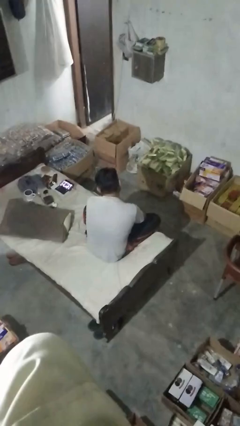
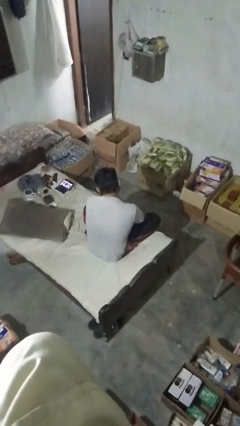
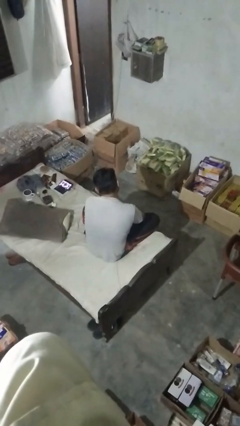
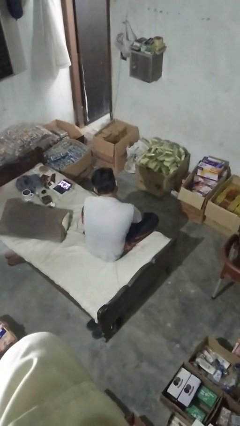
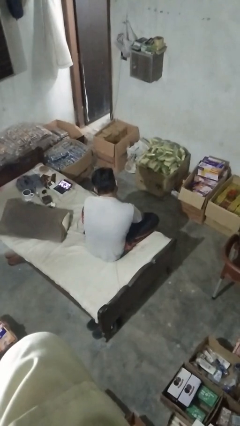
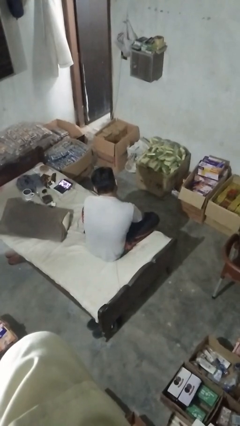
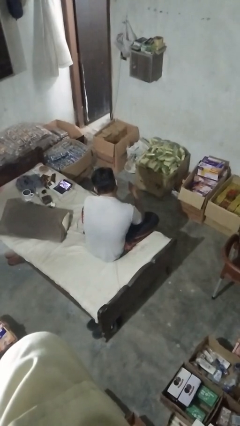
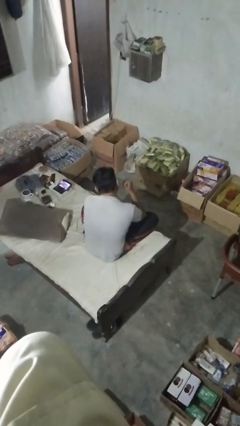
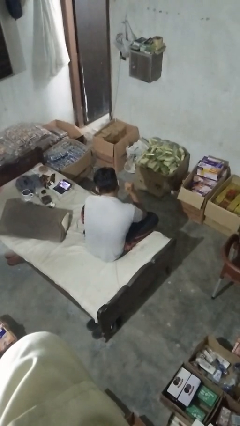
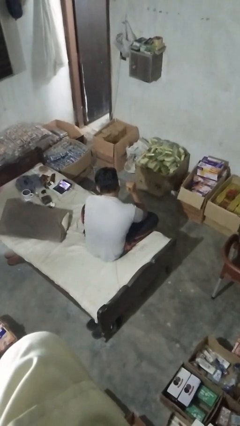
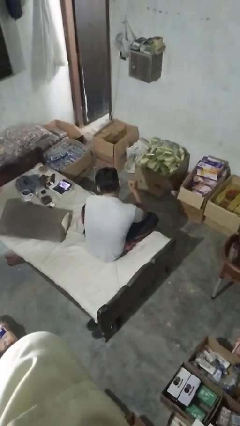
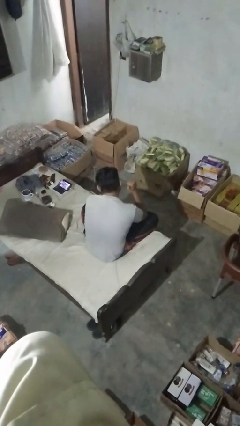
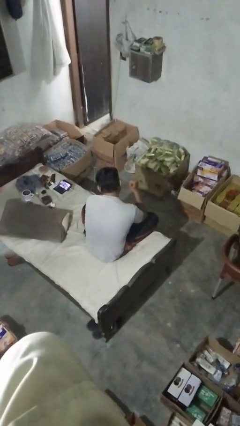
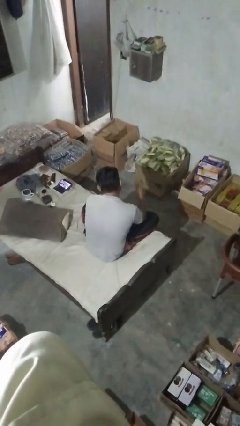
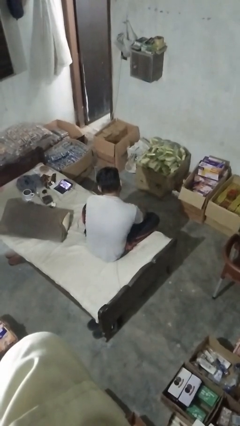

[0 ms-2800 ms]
person gestures behind me

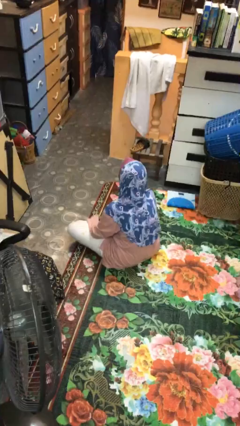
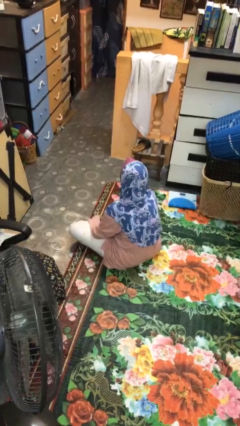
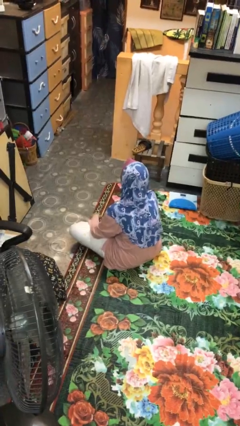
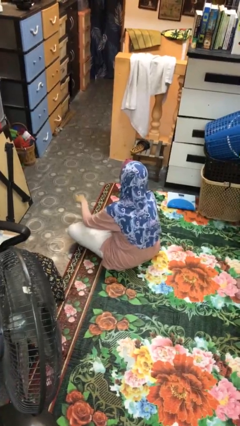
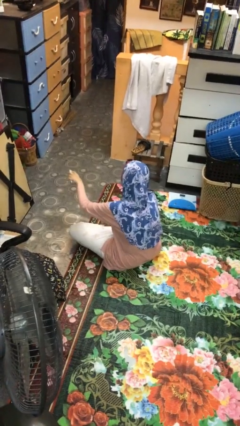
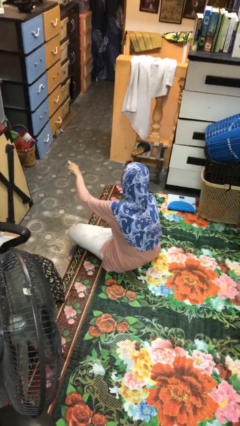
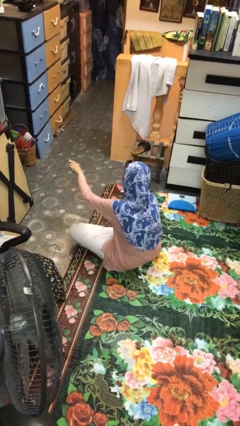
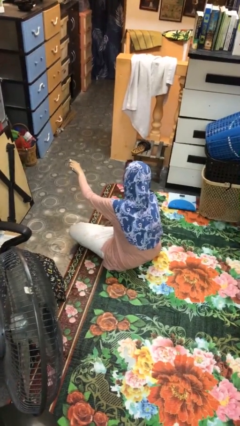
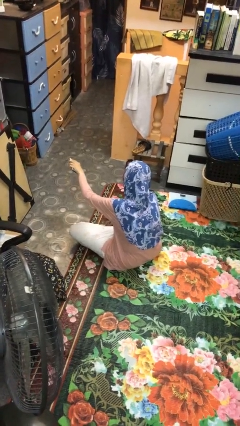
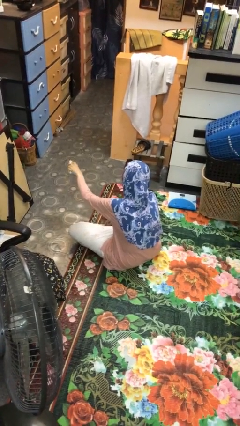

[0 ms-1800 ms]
person uses television remote

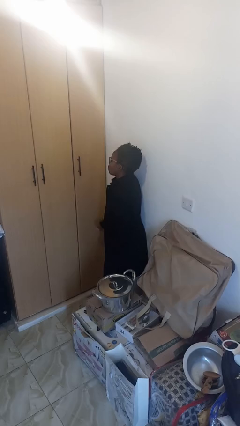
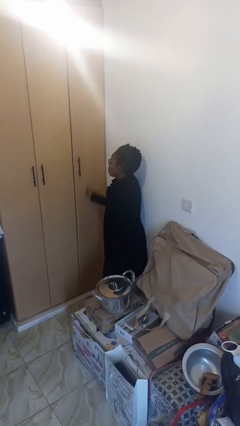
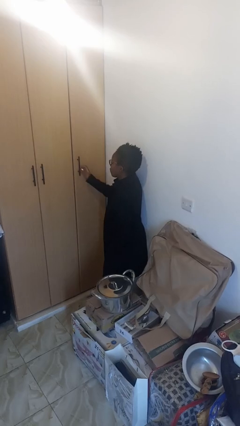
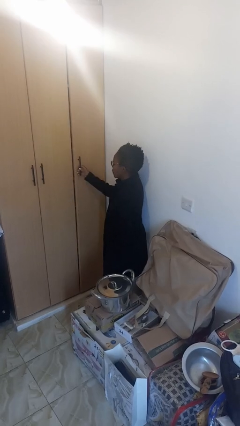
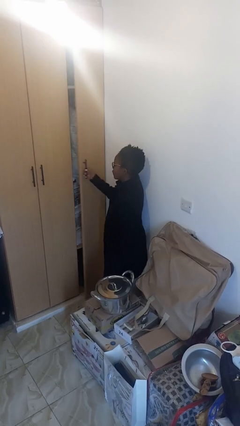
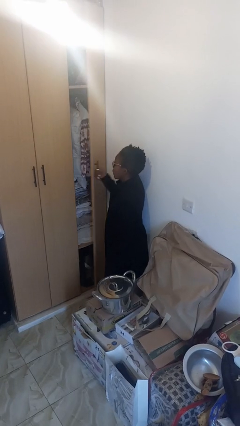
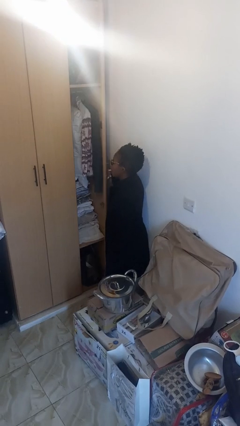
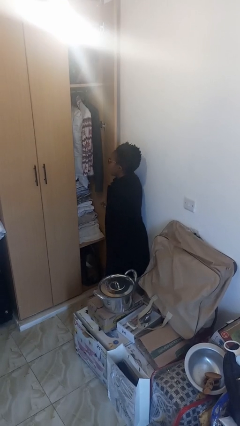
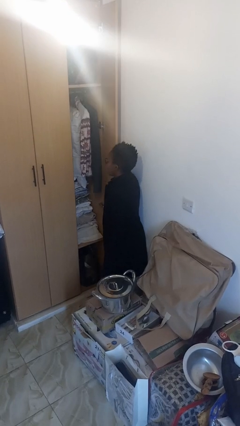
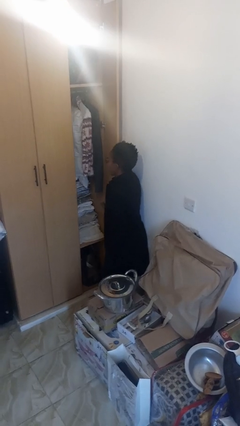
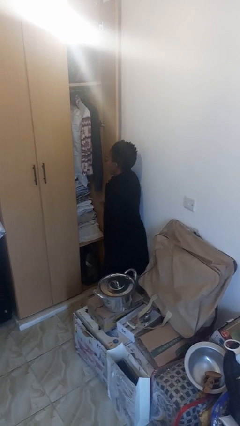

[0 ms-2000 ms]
person opens closet door

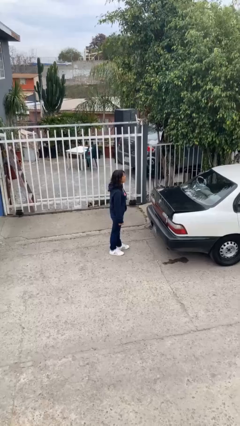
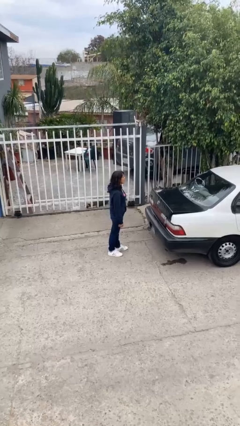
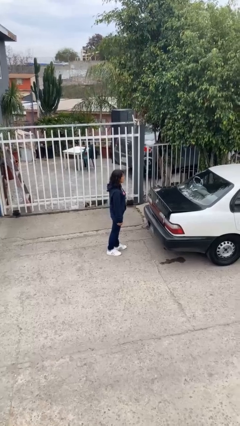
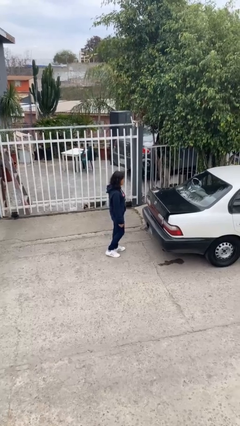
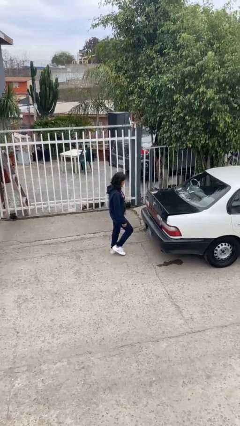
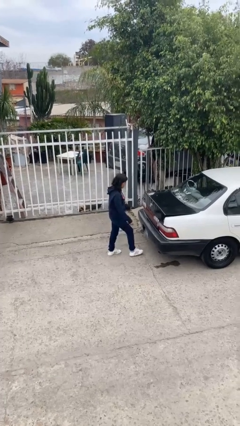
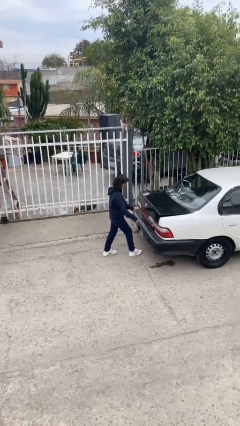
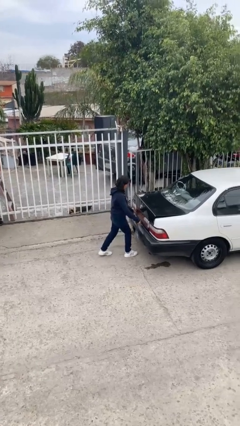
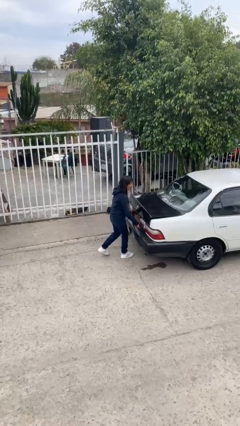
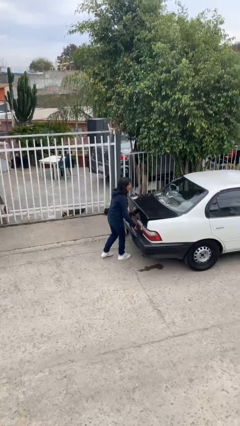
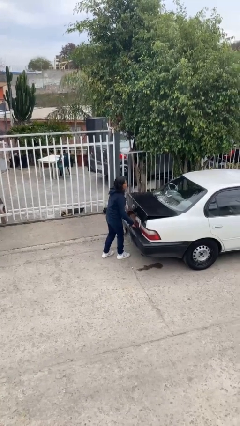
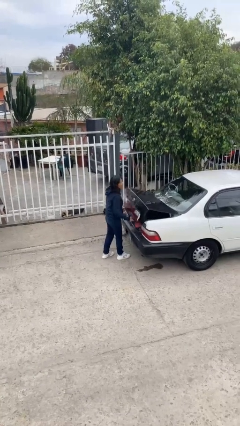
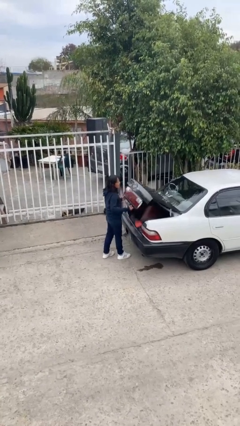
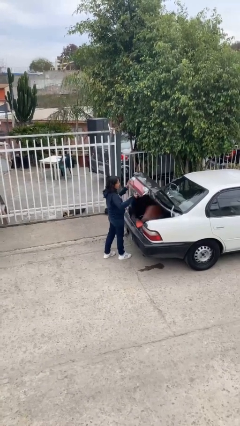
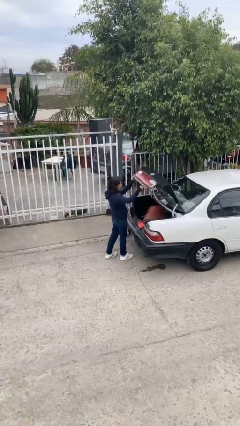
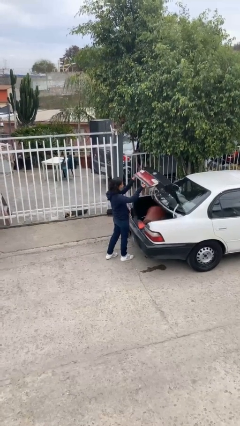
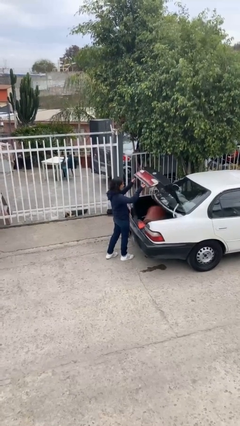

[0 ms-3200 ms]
person opens car trunk

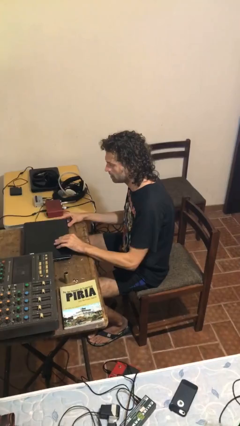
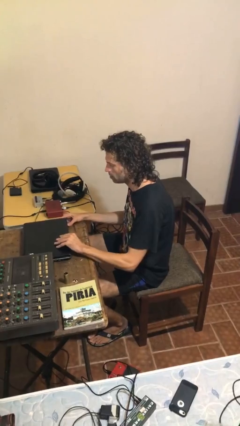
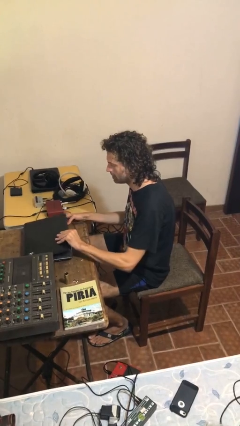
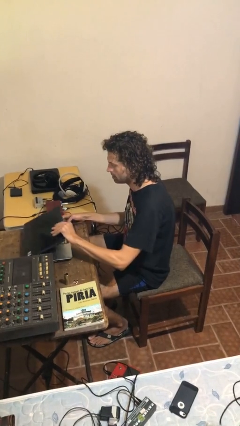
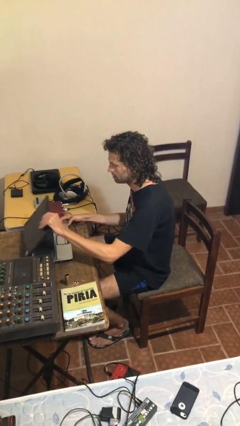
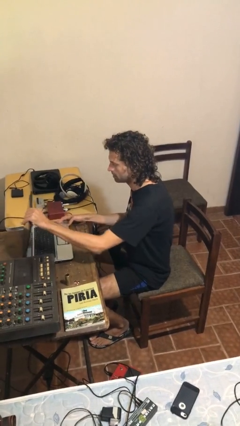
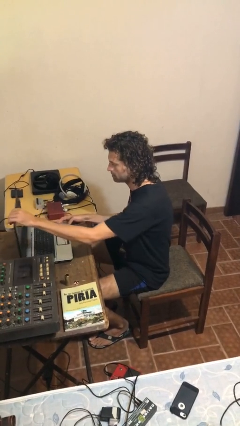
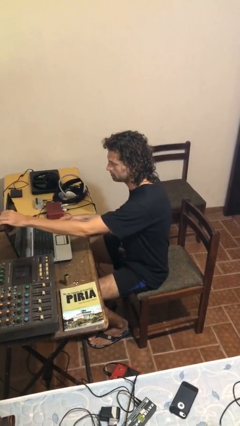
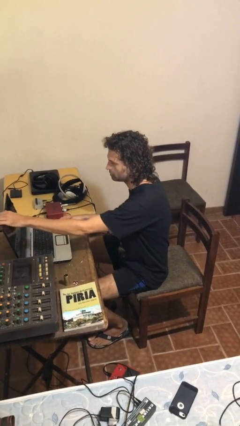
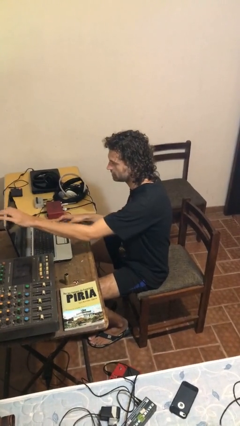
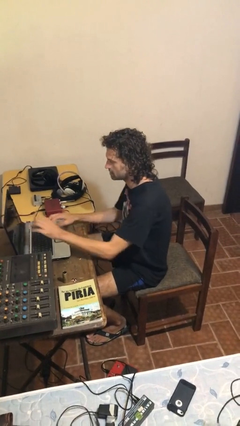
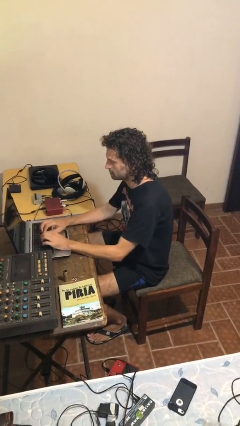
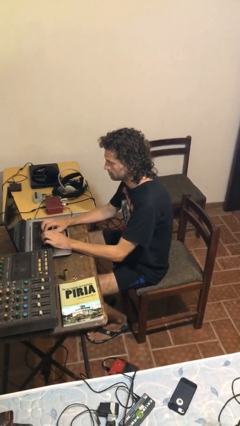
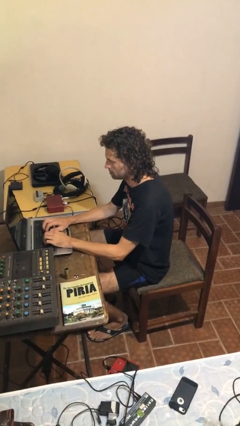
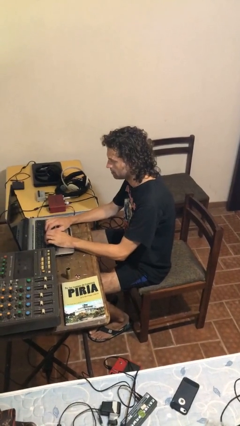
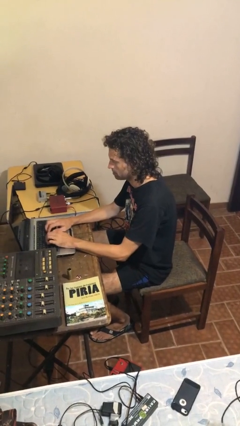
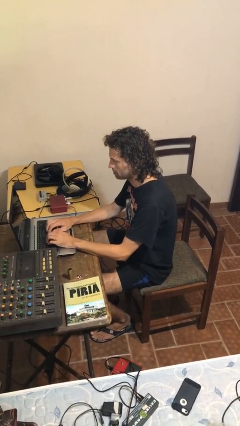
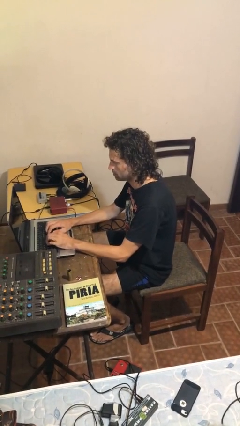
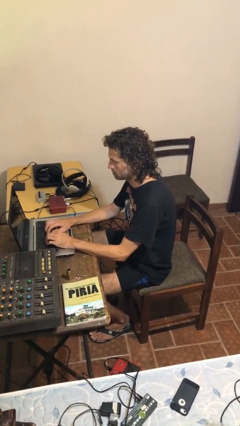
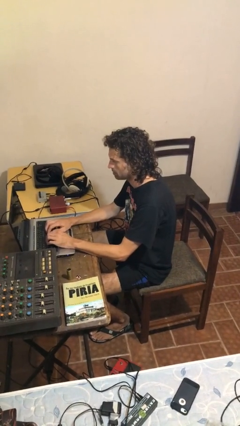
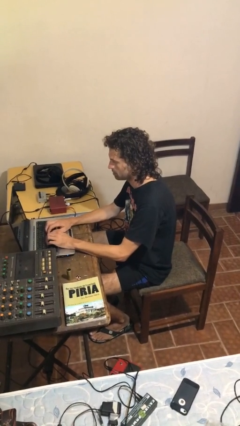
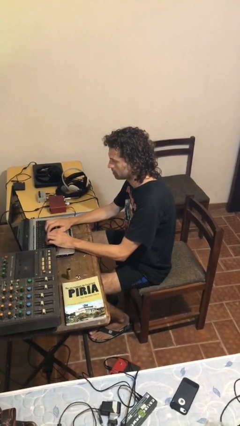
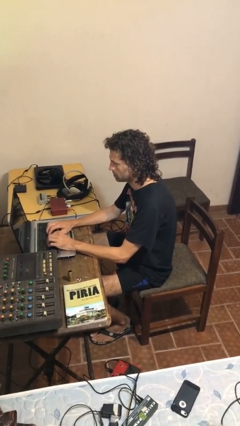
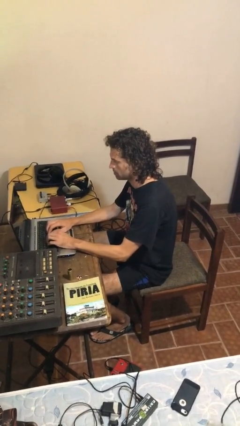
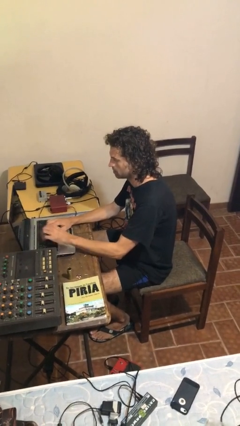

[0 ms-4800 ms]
person interacts with laptop

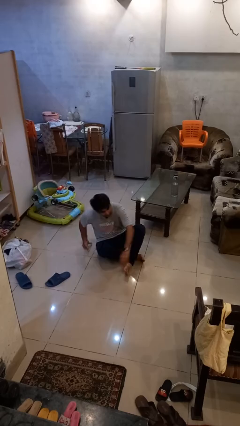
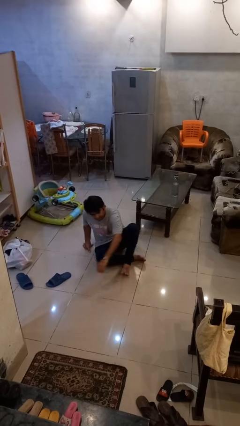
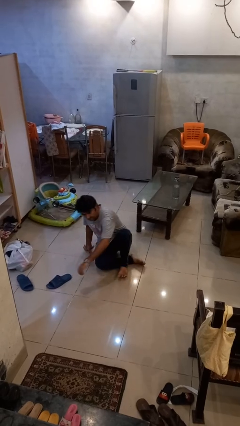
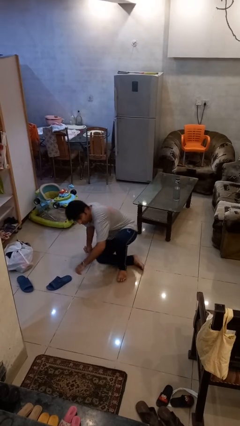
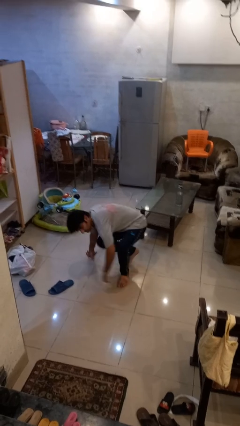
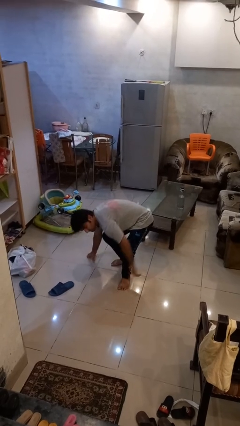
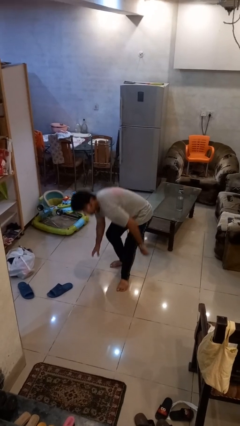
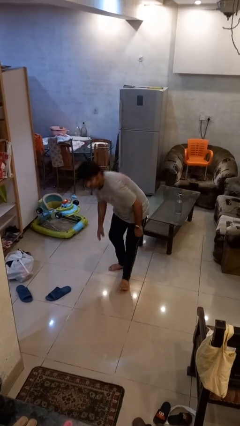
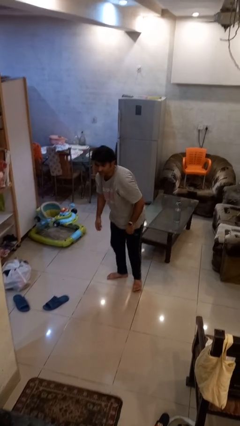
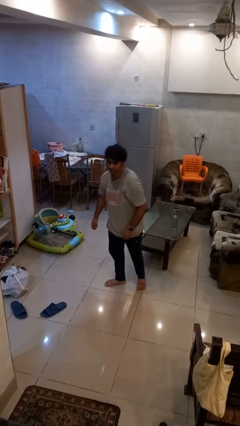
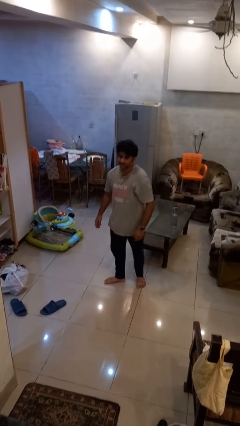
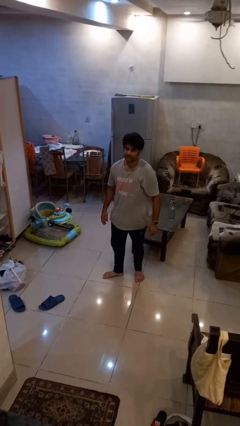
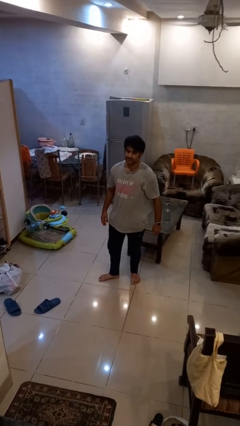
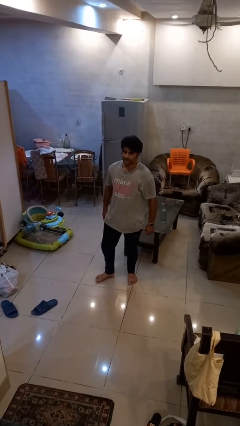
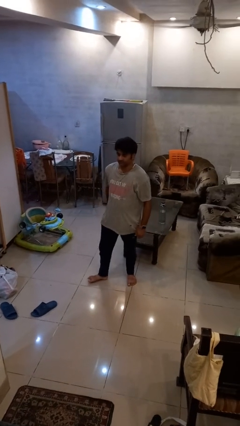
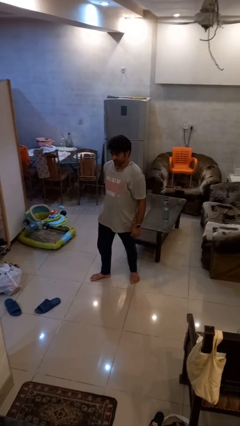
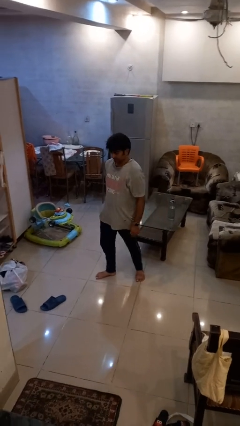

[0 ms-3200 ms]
person stands up from floor
